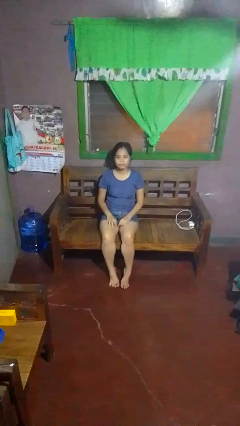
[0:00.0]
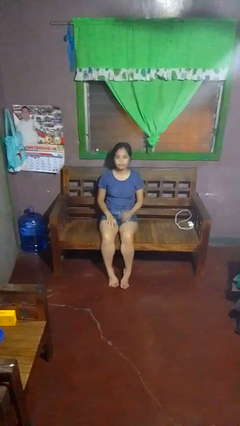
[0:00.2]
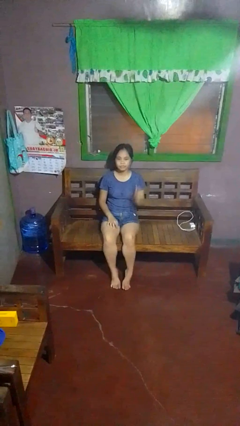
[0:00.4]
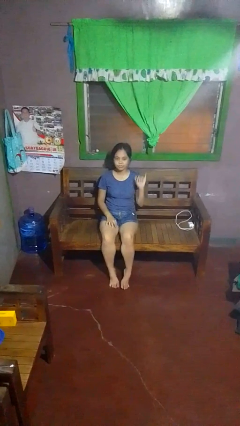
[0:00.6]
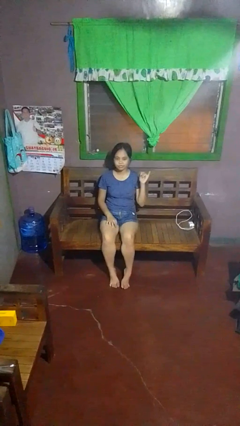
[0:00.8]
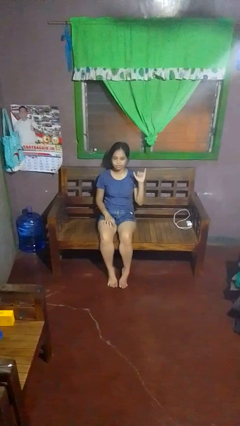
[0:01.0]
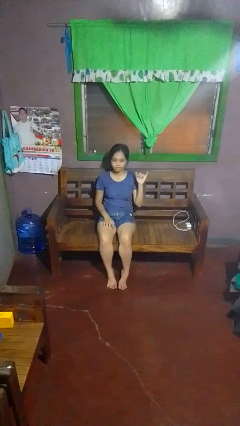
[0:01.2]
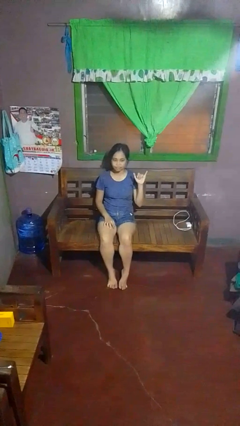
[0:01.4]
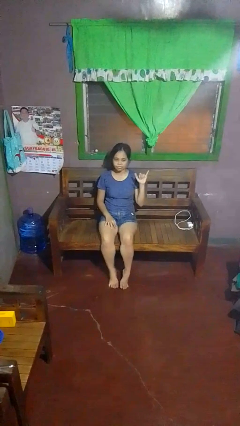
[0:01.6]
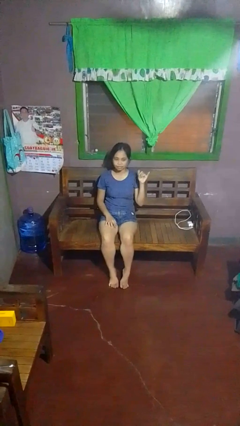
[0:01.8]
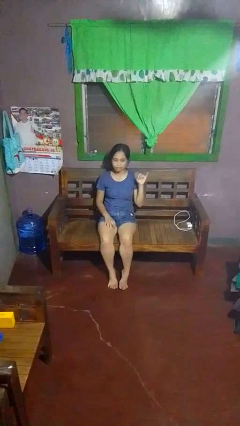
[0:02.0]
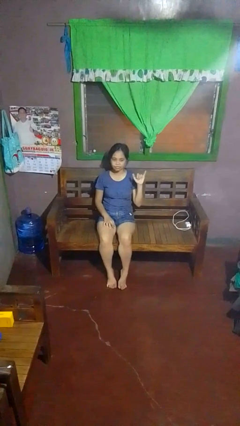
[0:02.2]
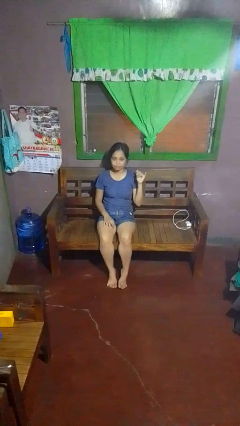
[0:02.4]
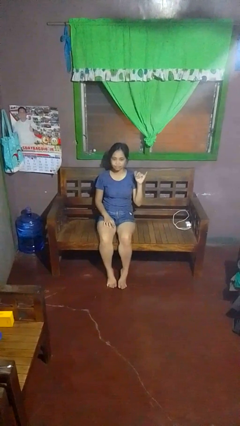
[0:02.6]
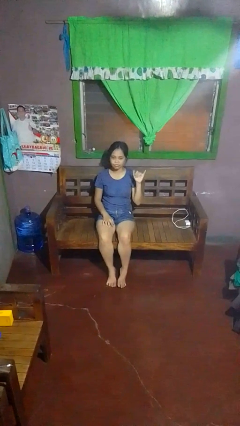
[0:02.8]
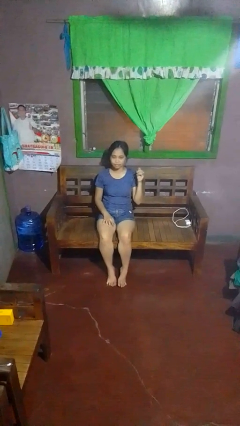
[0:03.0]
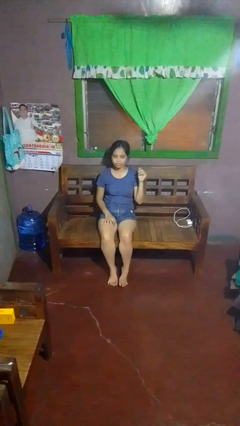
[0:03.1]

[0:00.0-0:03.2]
person gestures hang loose

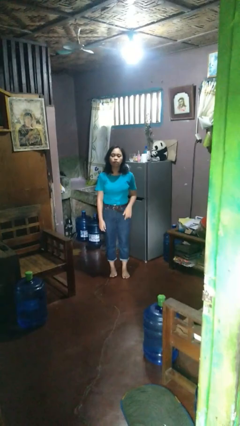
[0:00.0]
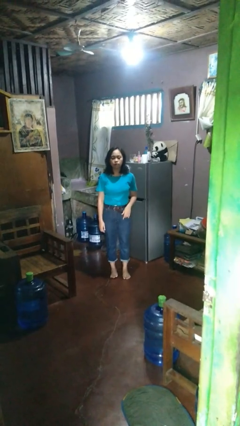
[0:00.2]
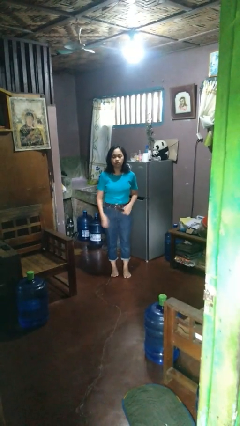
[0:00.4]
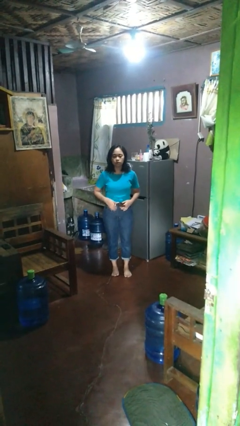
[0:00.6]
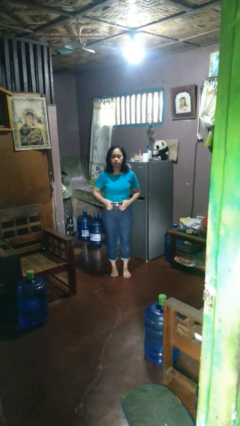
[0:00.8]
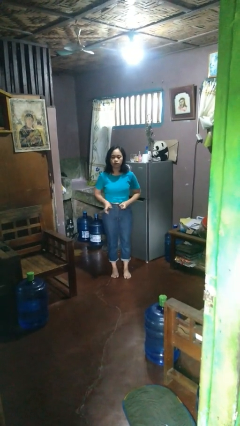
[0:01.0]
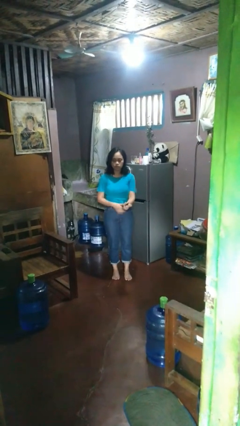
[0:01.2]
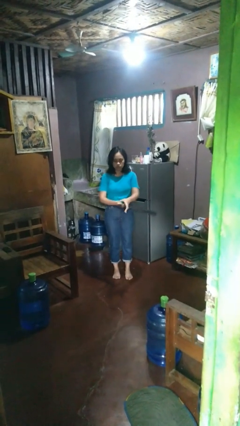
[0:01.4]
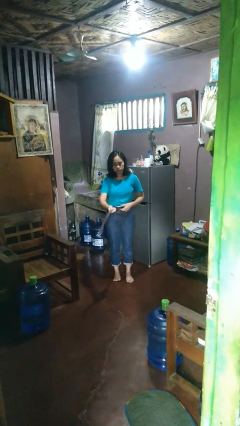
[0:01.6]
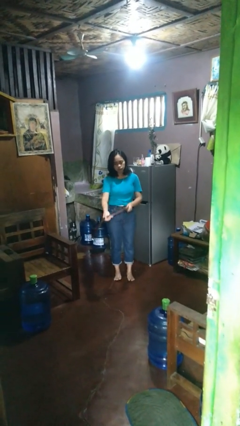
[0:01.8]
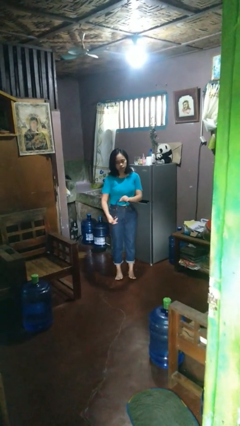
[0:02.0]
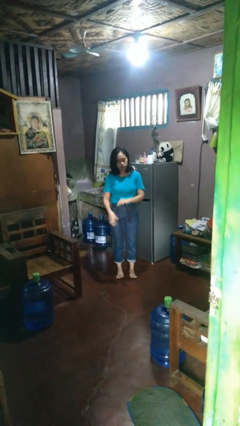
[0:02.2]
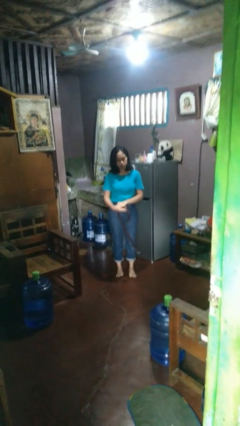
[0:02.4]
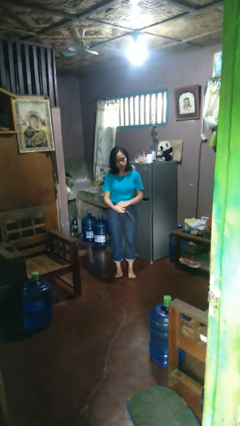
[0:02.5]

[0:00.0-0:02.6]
person takes off belt

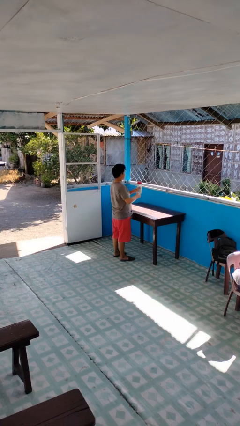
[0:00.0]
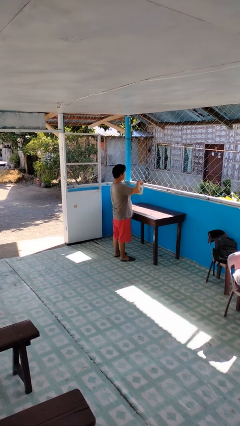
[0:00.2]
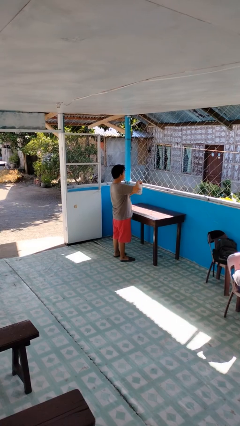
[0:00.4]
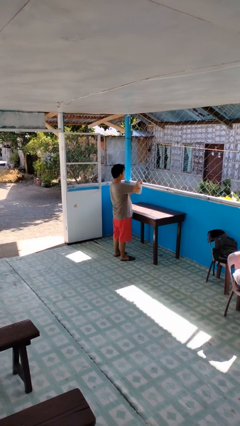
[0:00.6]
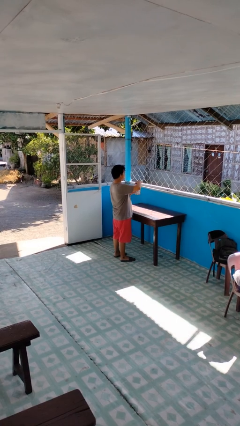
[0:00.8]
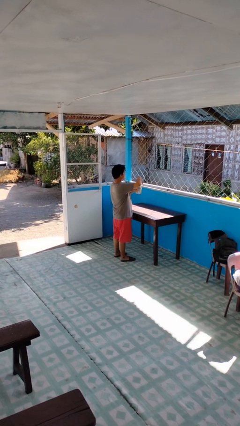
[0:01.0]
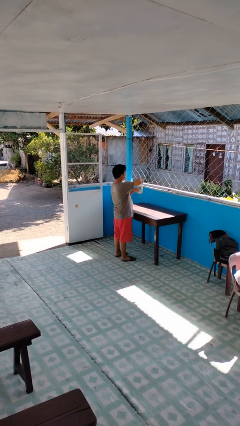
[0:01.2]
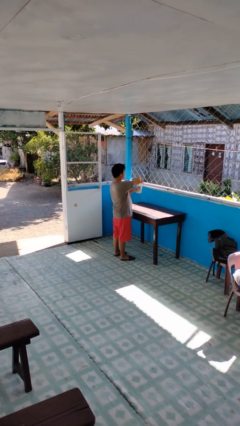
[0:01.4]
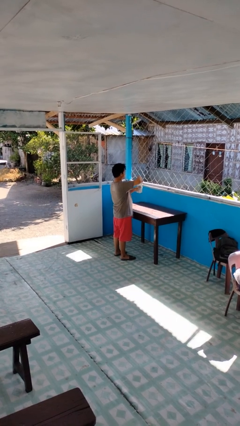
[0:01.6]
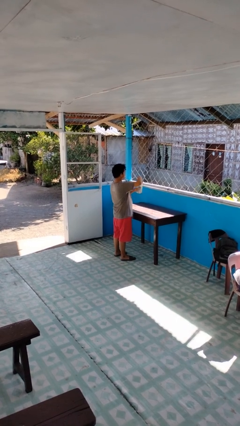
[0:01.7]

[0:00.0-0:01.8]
person opens jar

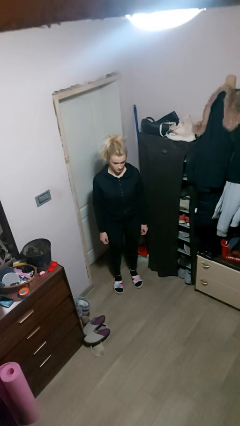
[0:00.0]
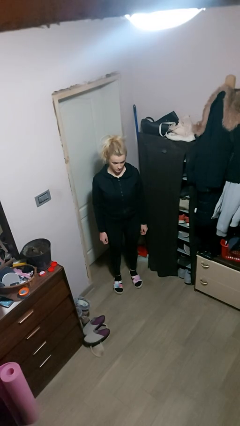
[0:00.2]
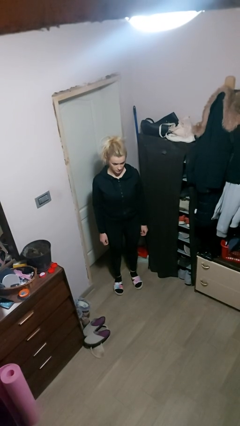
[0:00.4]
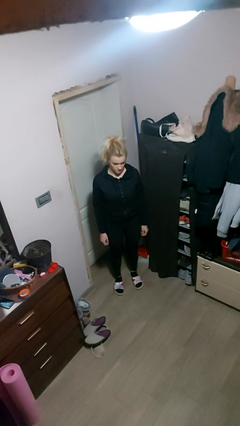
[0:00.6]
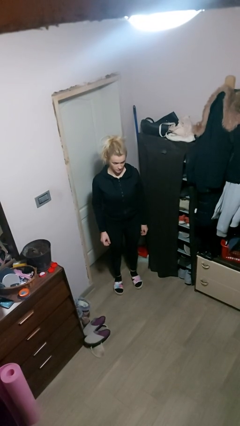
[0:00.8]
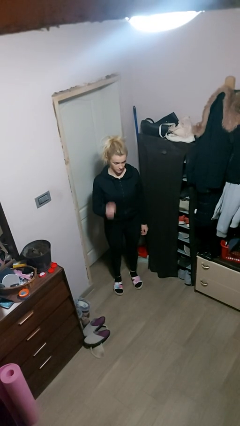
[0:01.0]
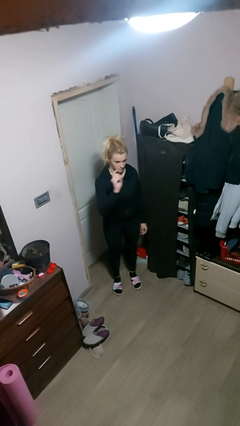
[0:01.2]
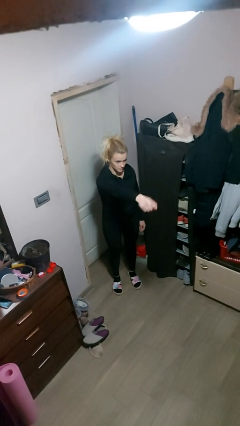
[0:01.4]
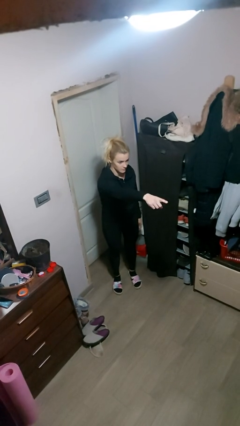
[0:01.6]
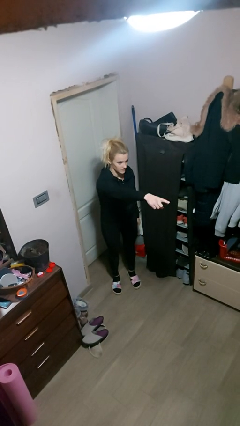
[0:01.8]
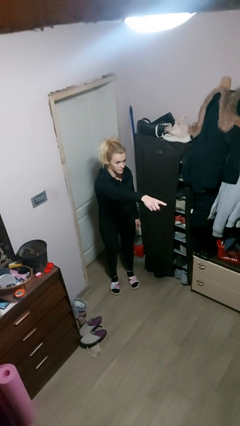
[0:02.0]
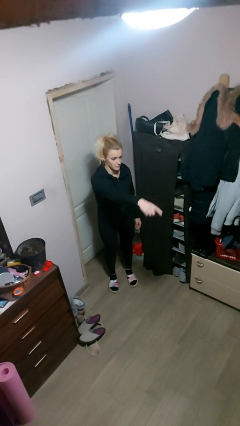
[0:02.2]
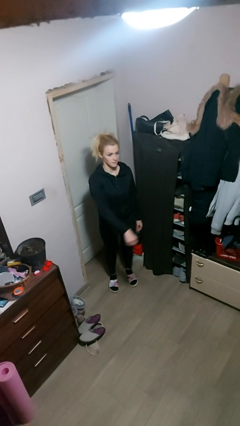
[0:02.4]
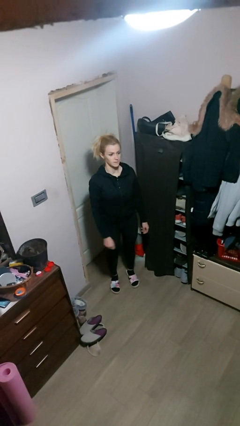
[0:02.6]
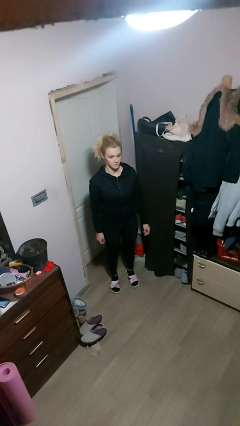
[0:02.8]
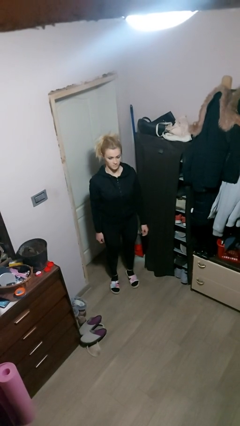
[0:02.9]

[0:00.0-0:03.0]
person points at person

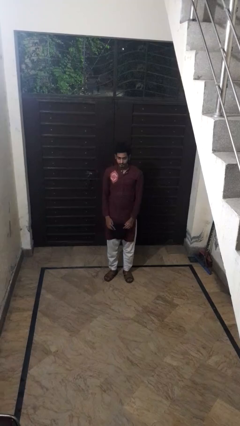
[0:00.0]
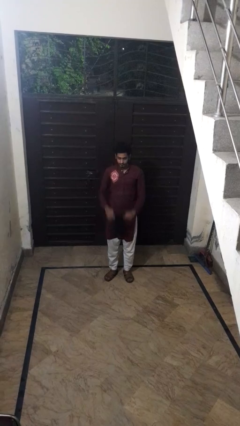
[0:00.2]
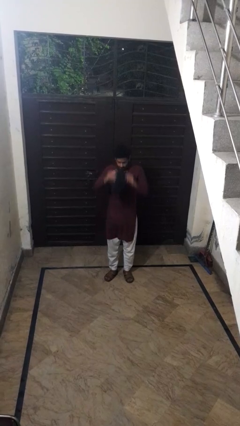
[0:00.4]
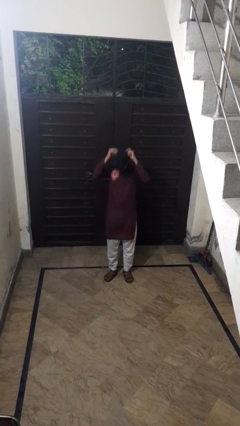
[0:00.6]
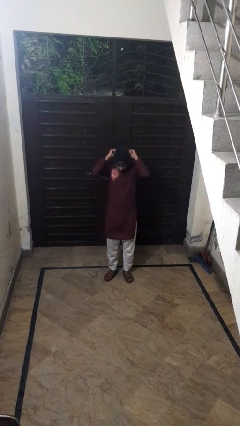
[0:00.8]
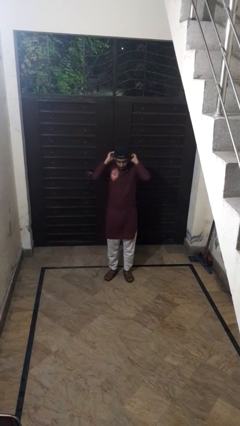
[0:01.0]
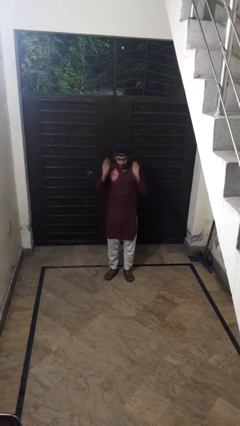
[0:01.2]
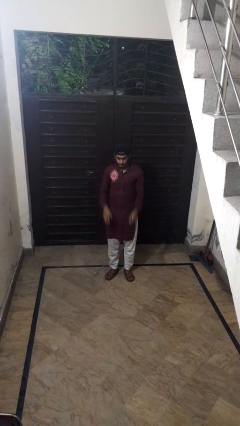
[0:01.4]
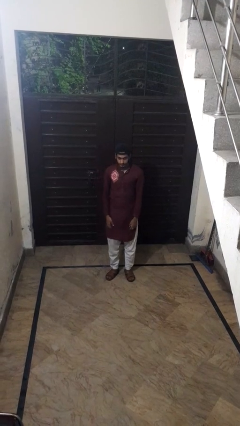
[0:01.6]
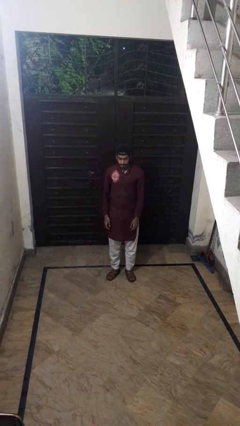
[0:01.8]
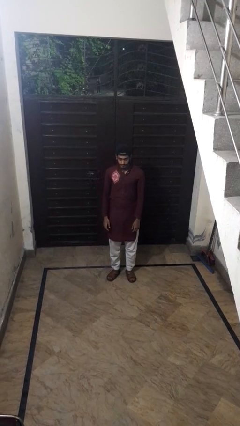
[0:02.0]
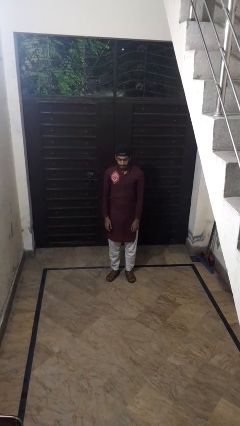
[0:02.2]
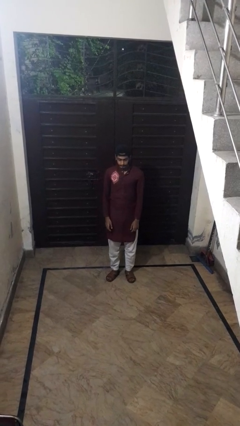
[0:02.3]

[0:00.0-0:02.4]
person puts on hat

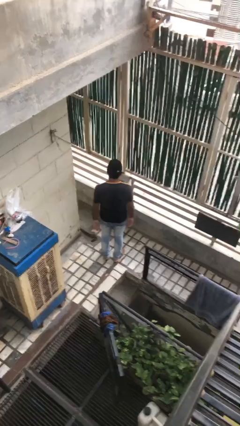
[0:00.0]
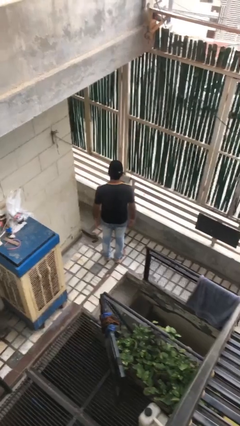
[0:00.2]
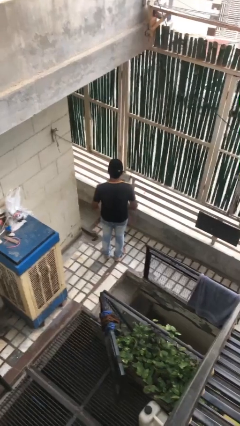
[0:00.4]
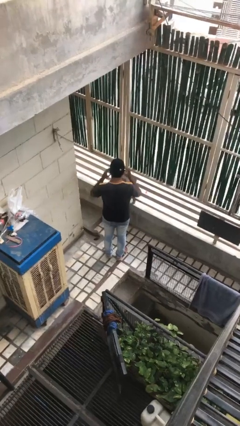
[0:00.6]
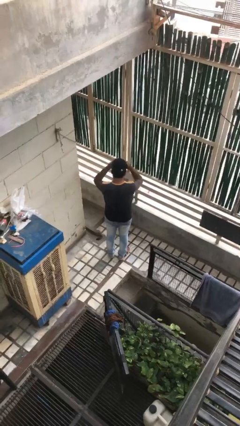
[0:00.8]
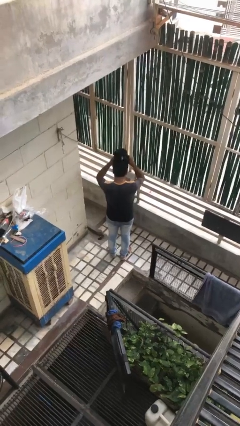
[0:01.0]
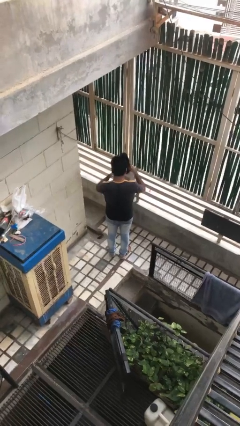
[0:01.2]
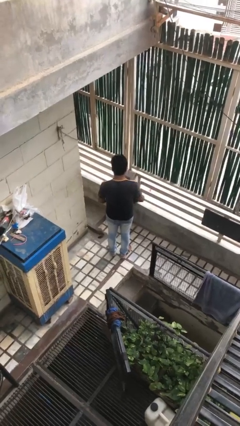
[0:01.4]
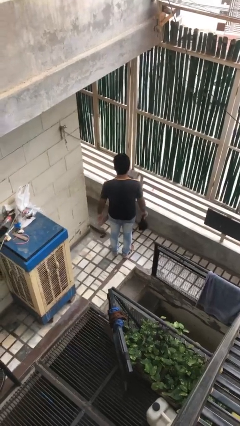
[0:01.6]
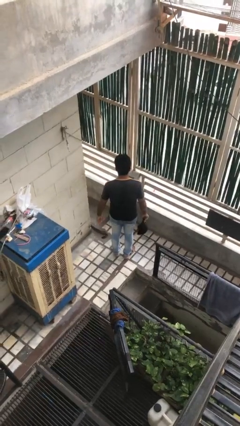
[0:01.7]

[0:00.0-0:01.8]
person takes off hat

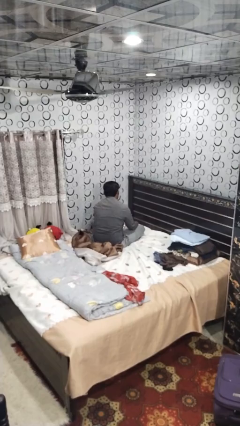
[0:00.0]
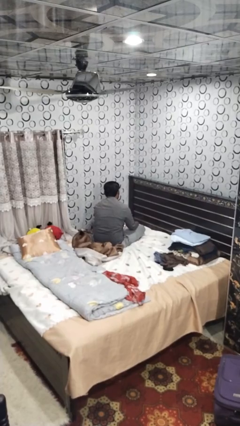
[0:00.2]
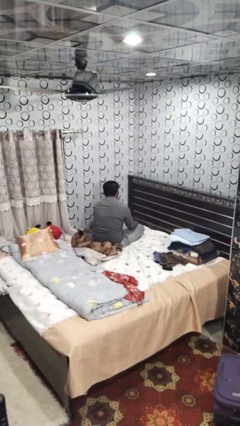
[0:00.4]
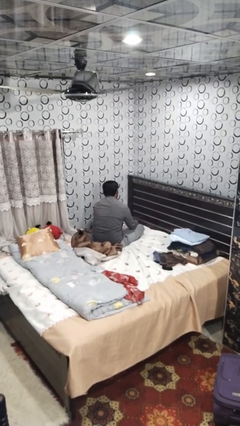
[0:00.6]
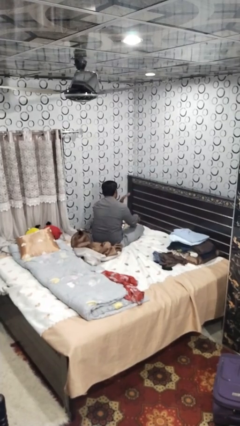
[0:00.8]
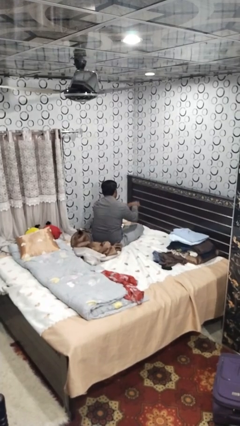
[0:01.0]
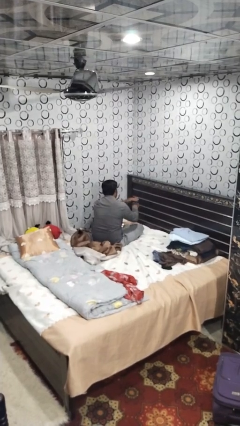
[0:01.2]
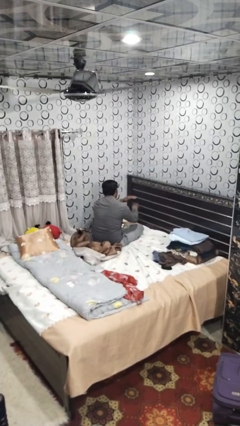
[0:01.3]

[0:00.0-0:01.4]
person swats bug

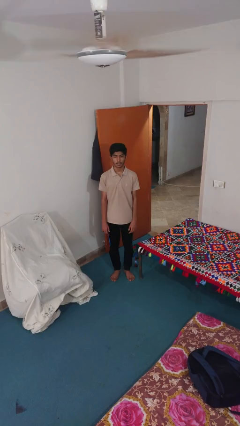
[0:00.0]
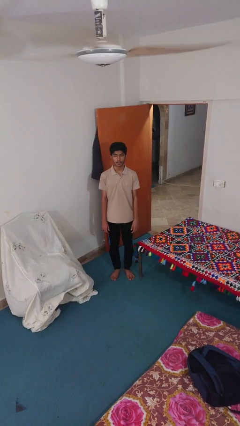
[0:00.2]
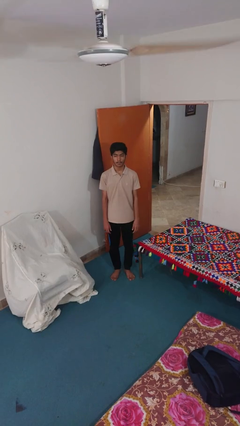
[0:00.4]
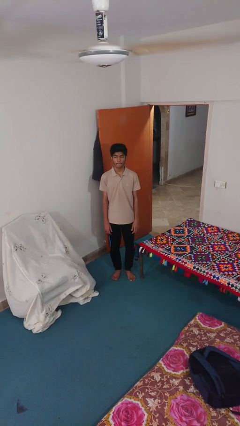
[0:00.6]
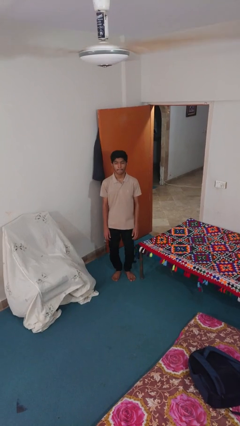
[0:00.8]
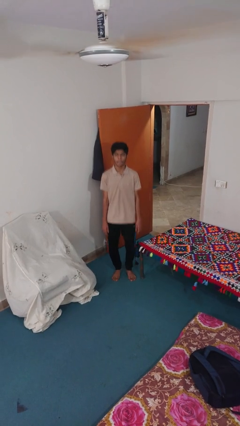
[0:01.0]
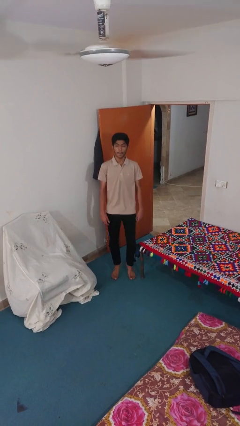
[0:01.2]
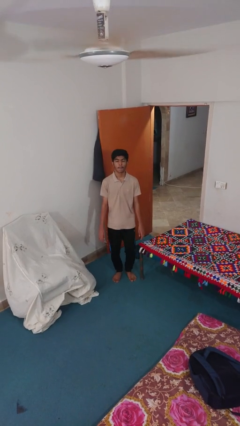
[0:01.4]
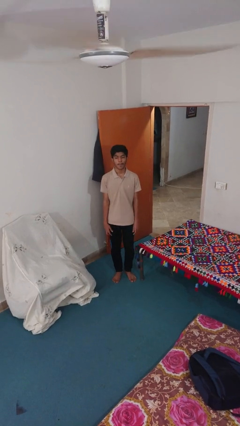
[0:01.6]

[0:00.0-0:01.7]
person jumps
